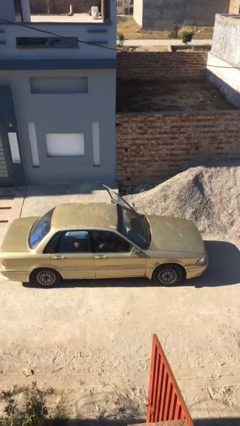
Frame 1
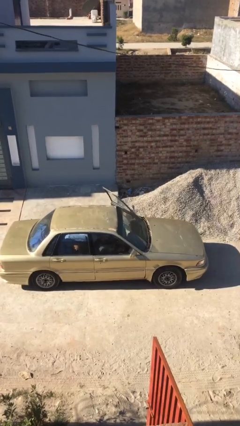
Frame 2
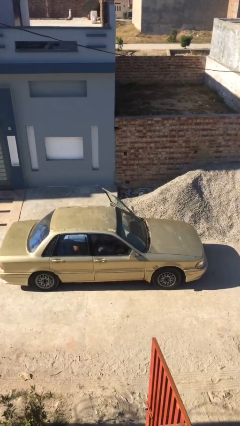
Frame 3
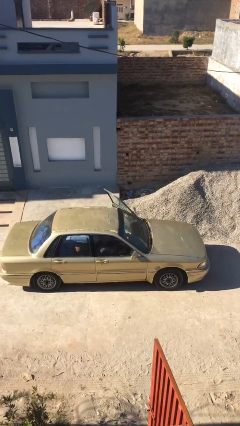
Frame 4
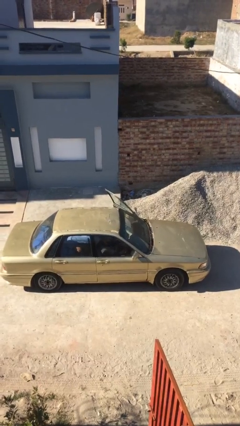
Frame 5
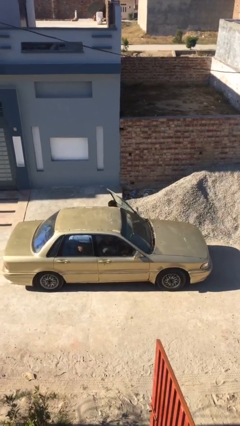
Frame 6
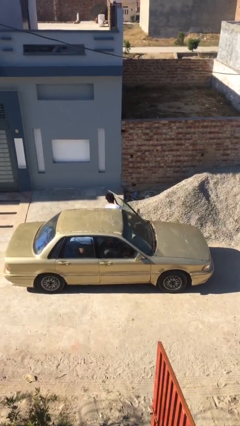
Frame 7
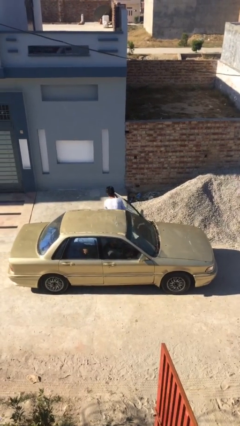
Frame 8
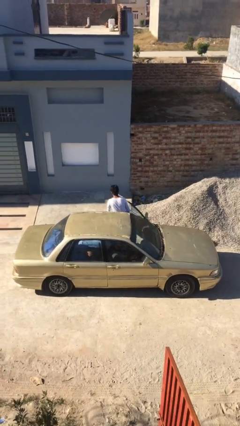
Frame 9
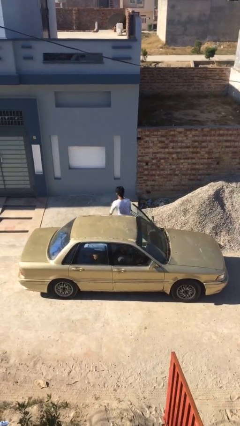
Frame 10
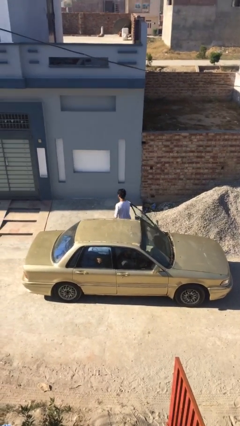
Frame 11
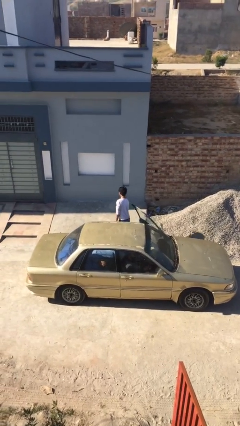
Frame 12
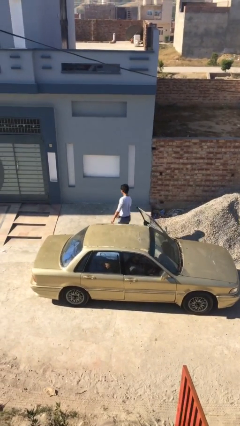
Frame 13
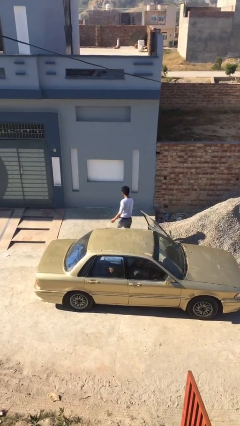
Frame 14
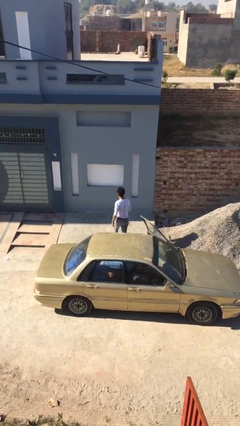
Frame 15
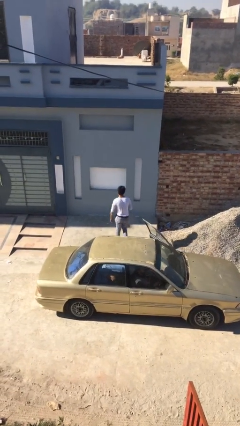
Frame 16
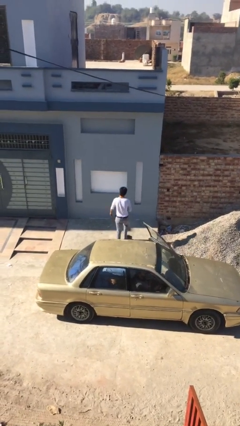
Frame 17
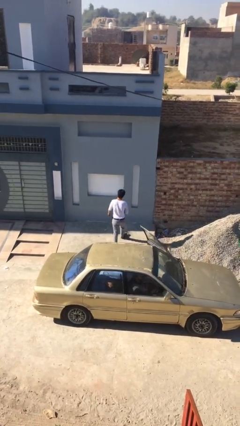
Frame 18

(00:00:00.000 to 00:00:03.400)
person exits car

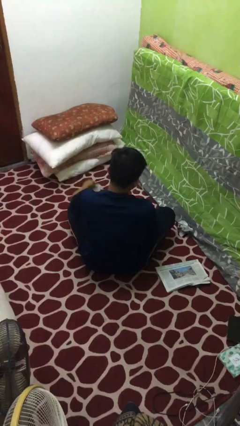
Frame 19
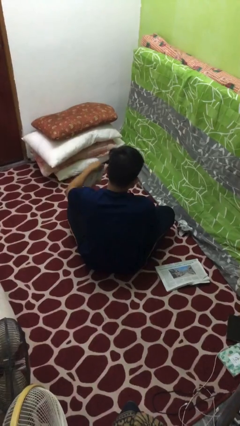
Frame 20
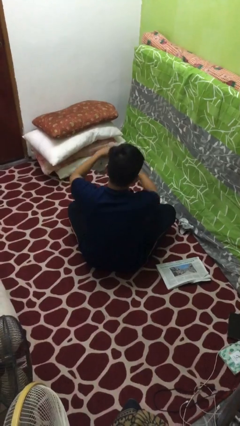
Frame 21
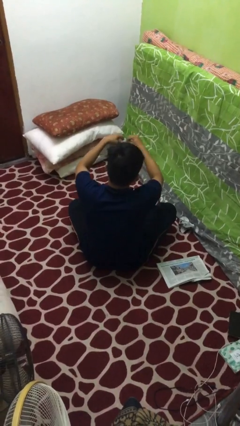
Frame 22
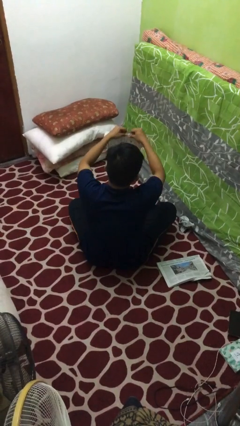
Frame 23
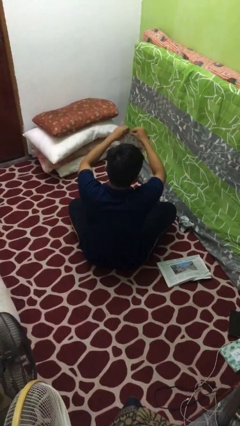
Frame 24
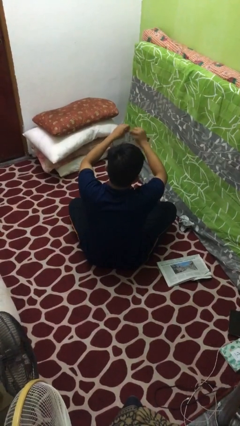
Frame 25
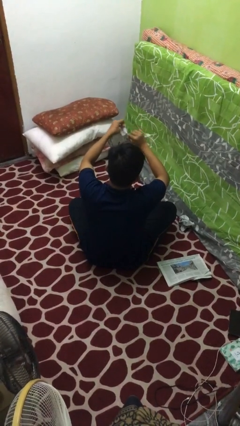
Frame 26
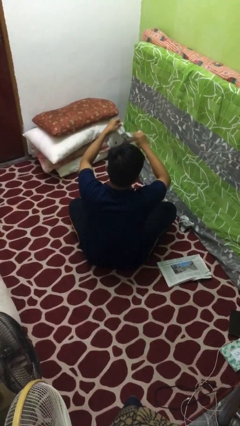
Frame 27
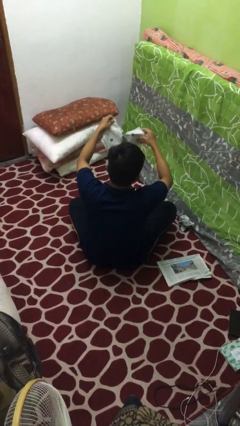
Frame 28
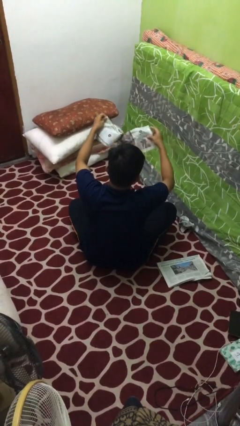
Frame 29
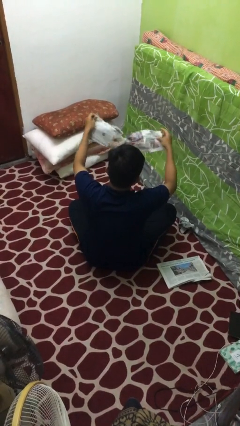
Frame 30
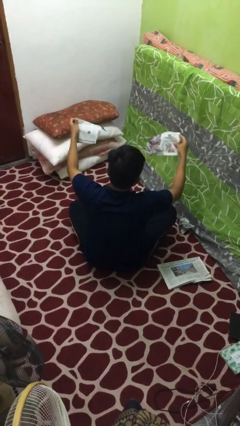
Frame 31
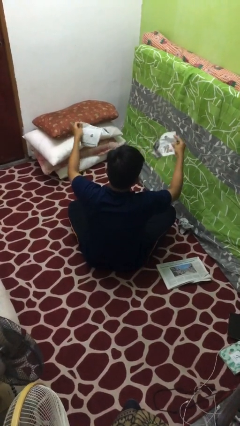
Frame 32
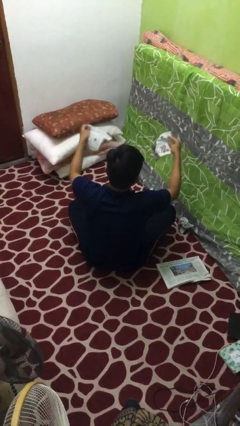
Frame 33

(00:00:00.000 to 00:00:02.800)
person tears paper

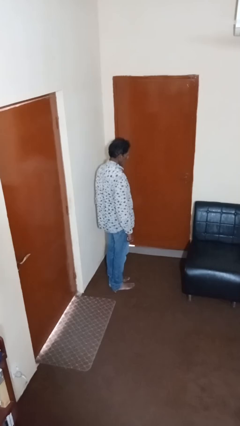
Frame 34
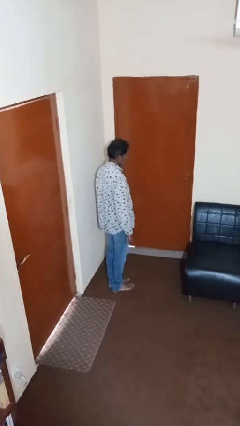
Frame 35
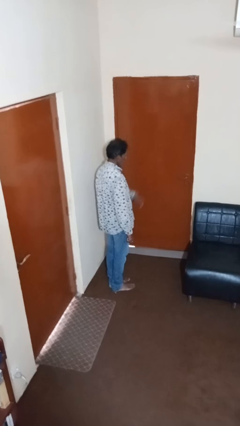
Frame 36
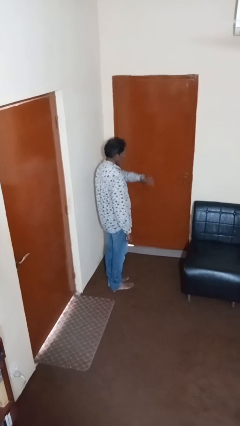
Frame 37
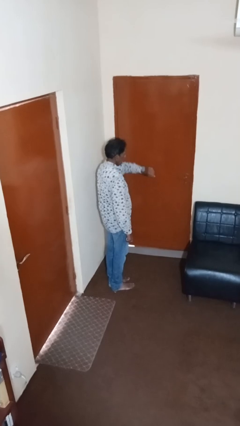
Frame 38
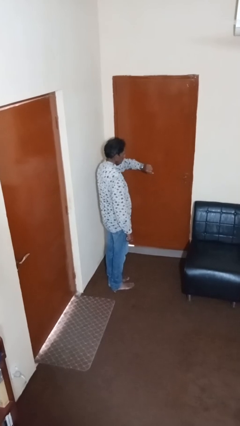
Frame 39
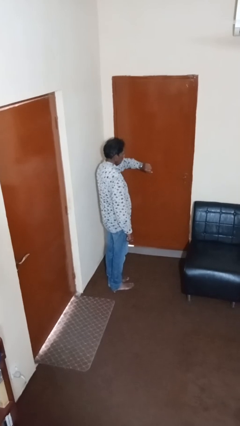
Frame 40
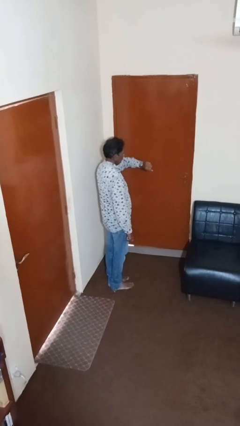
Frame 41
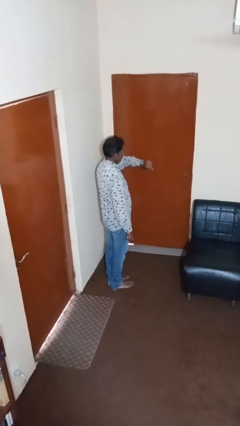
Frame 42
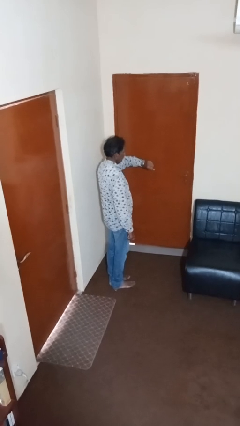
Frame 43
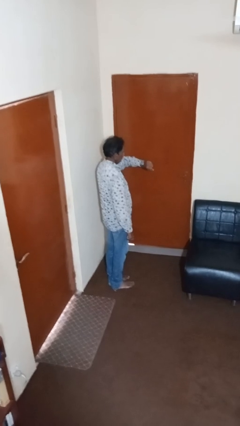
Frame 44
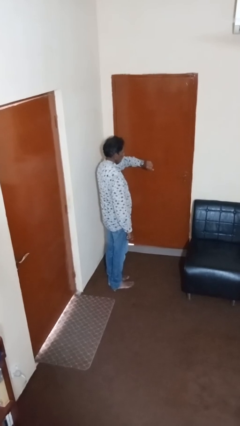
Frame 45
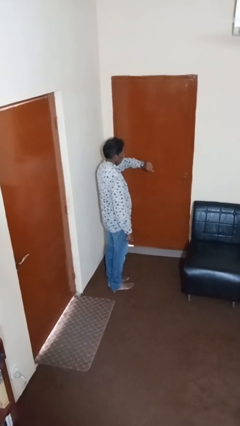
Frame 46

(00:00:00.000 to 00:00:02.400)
person looks at wristwatch

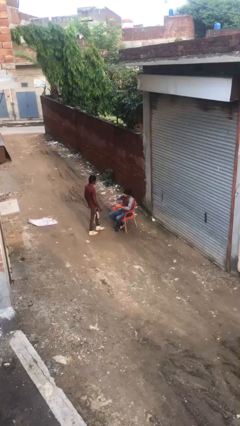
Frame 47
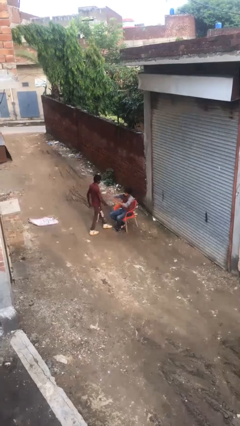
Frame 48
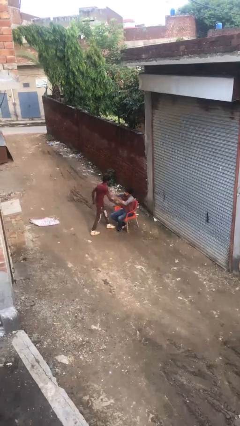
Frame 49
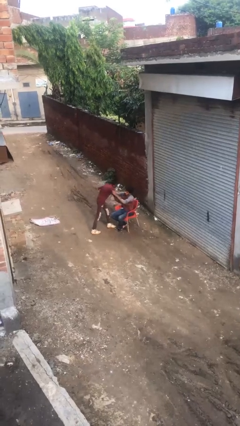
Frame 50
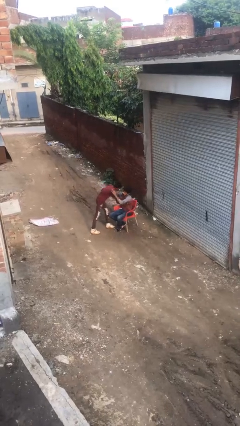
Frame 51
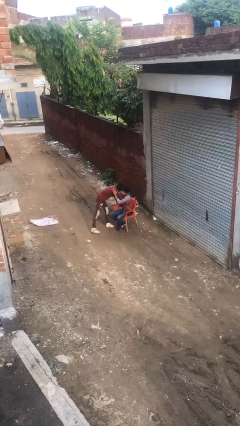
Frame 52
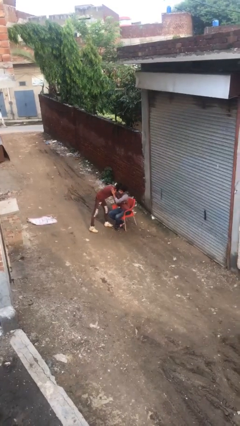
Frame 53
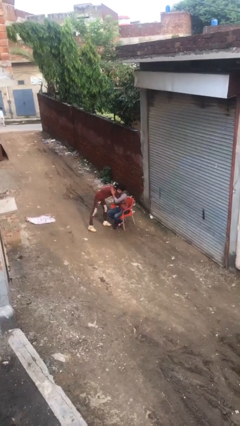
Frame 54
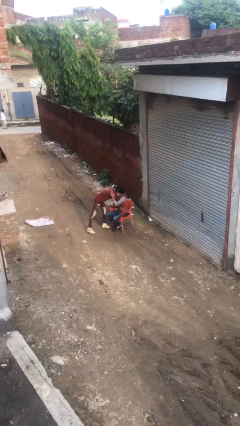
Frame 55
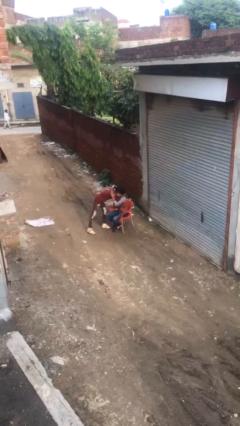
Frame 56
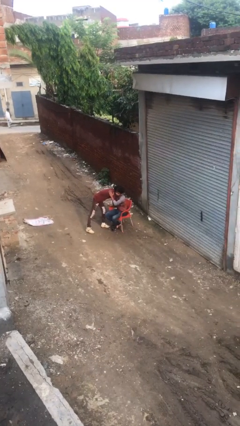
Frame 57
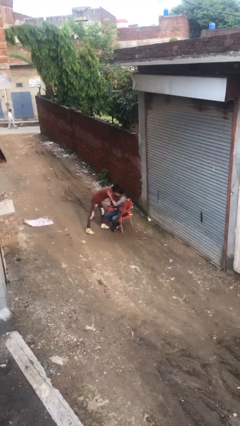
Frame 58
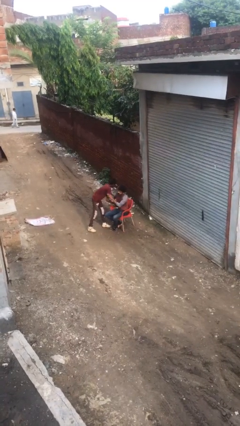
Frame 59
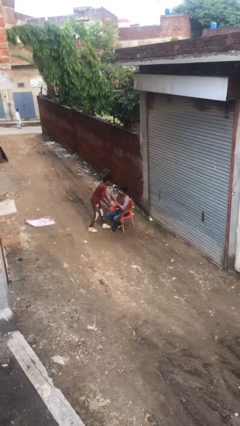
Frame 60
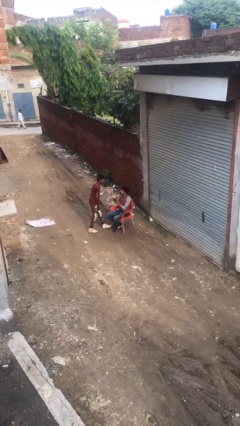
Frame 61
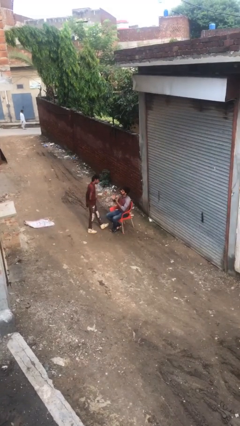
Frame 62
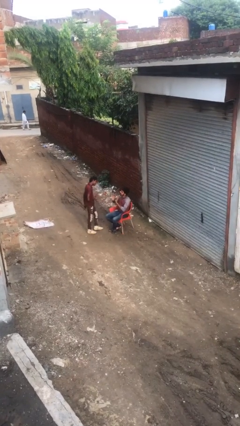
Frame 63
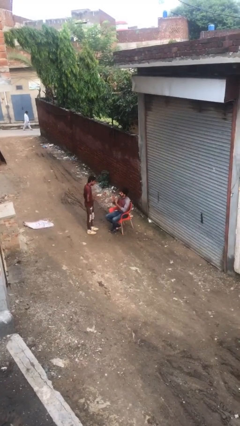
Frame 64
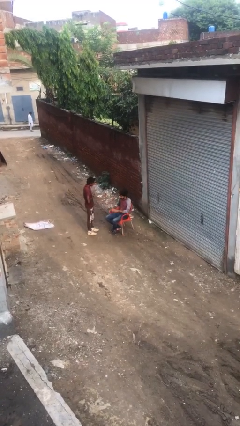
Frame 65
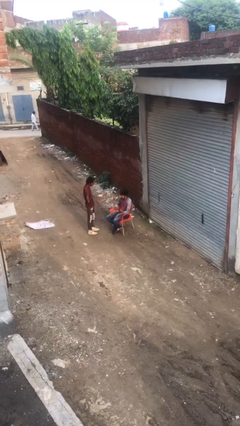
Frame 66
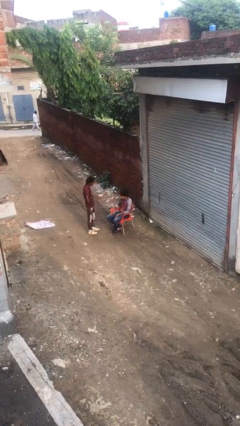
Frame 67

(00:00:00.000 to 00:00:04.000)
person embraces person

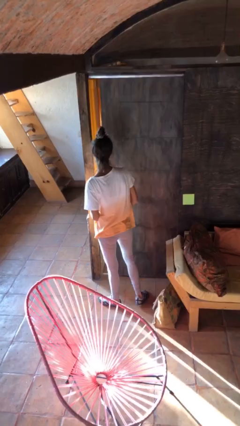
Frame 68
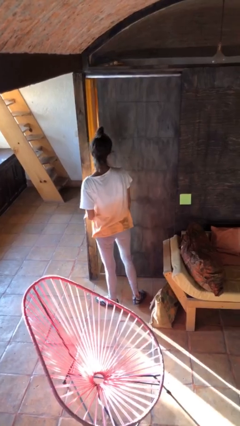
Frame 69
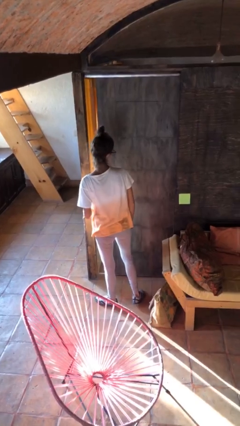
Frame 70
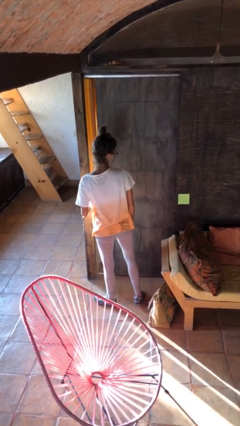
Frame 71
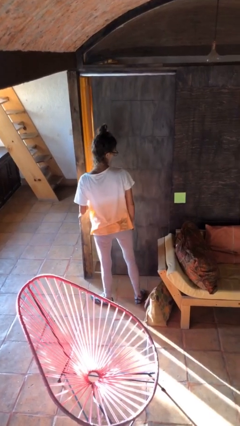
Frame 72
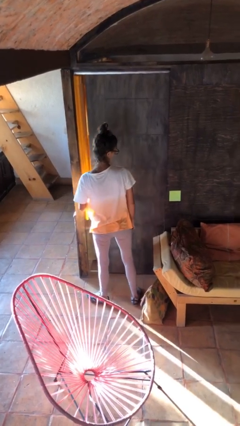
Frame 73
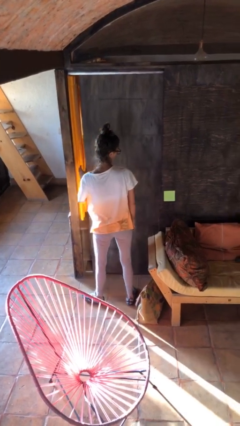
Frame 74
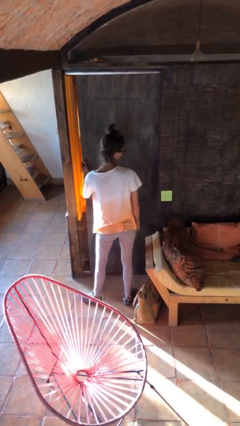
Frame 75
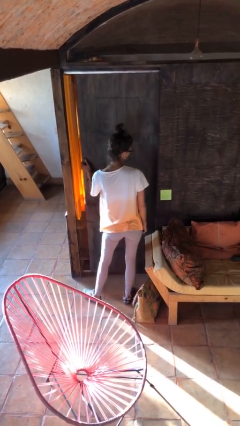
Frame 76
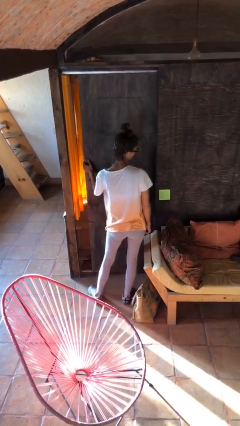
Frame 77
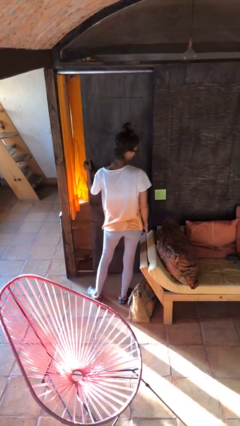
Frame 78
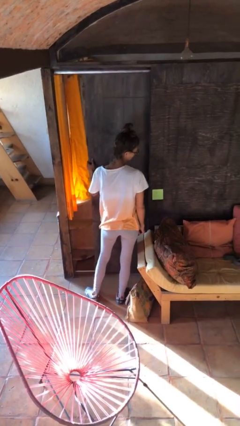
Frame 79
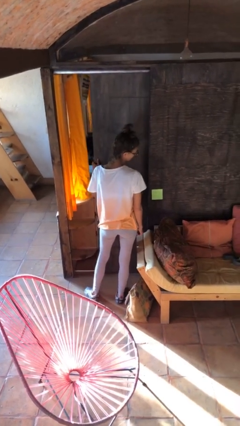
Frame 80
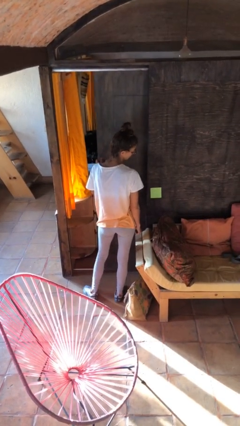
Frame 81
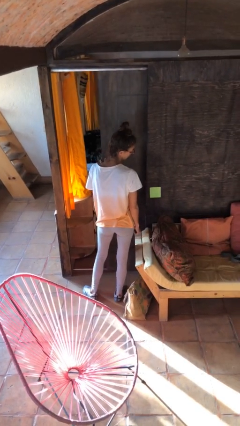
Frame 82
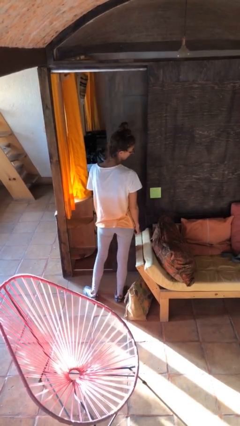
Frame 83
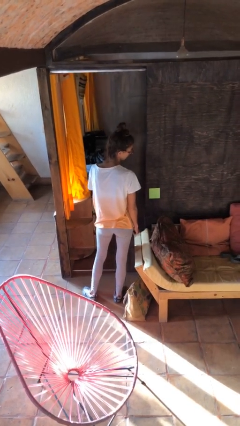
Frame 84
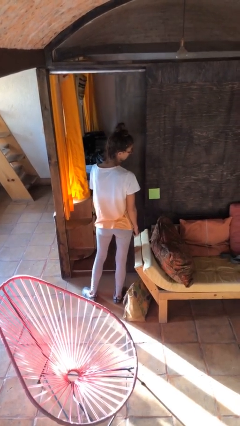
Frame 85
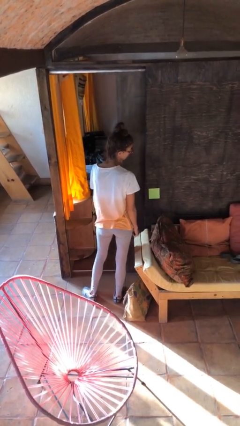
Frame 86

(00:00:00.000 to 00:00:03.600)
person opens sliding door

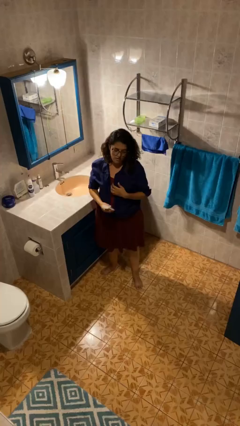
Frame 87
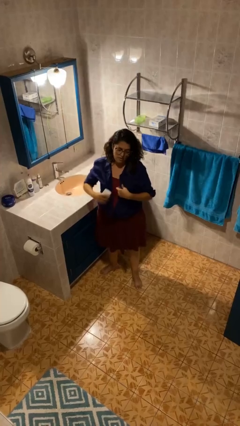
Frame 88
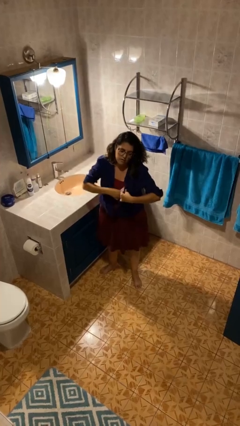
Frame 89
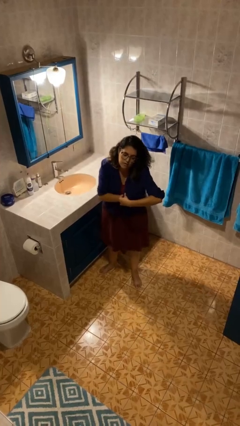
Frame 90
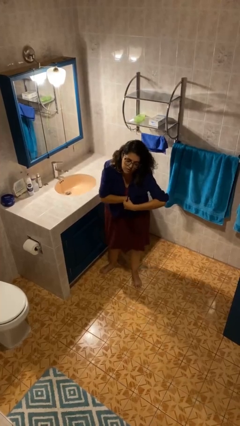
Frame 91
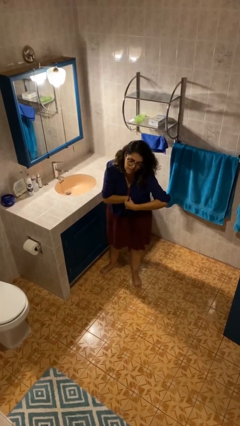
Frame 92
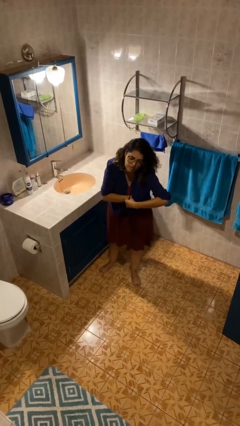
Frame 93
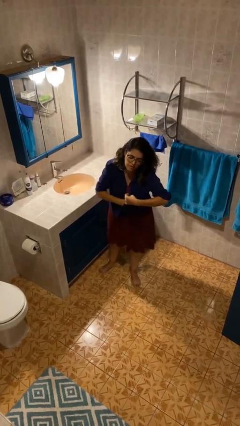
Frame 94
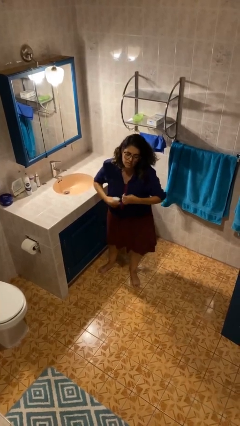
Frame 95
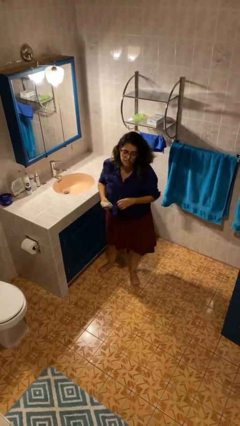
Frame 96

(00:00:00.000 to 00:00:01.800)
person applies deodorant
